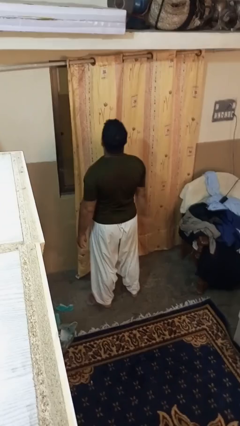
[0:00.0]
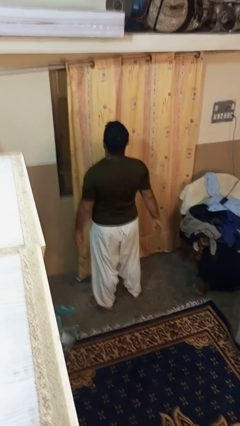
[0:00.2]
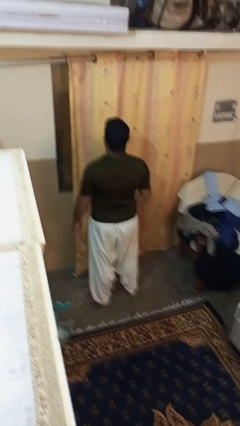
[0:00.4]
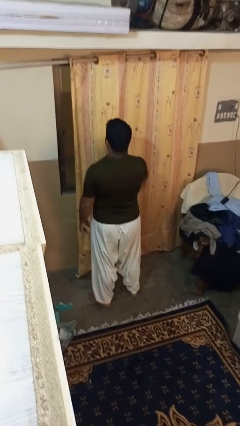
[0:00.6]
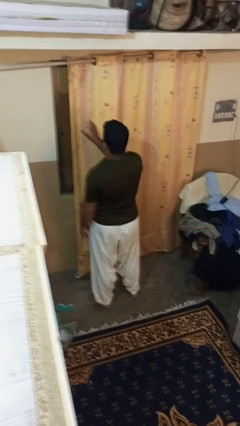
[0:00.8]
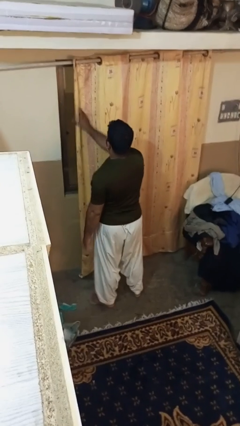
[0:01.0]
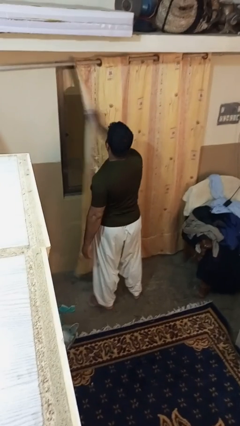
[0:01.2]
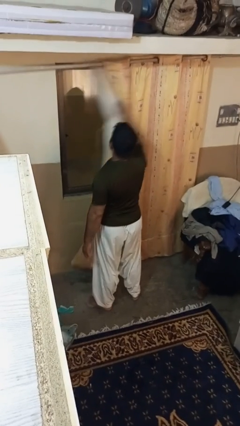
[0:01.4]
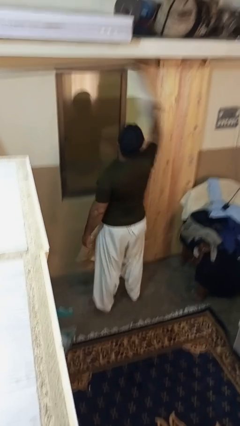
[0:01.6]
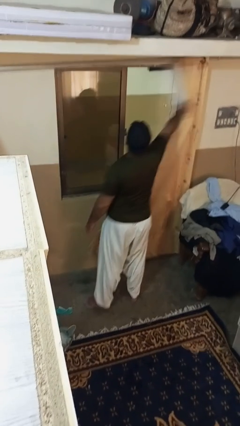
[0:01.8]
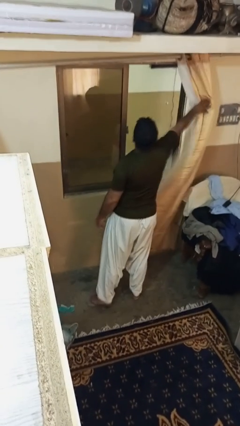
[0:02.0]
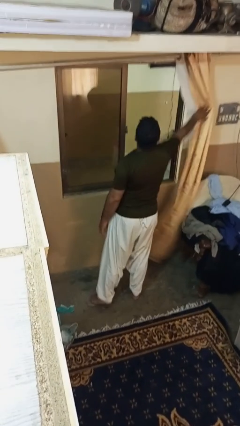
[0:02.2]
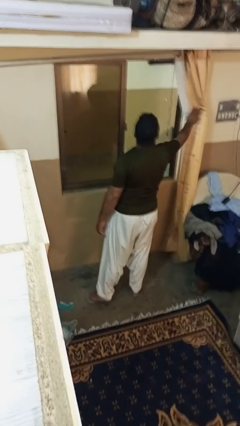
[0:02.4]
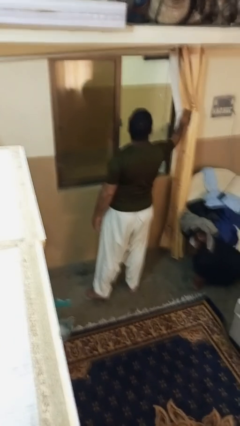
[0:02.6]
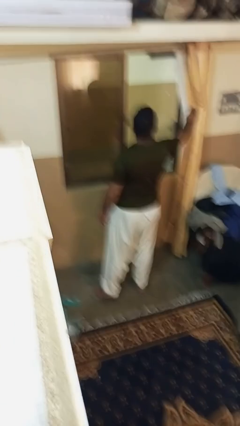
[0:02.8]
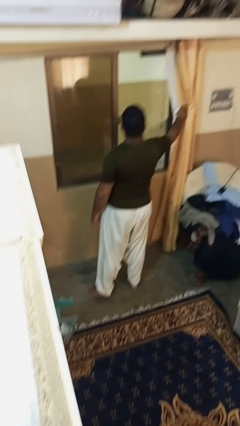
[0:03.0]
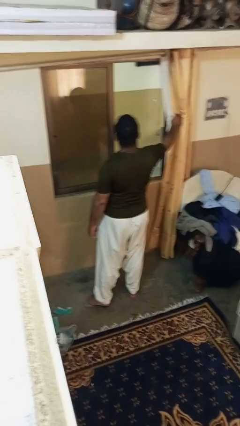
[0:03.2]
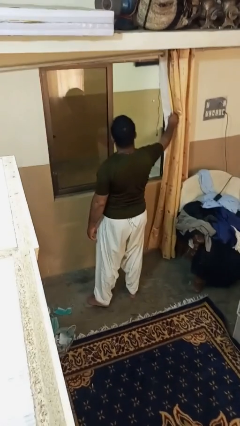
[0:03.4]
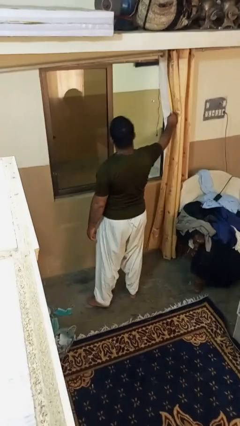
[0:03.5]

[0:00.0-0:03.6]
person opens curtains

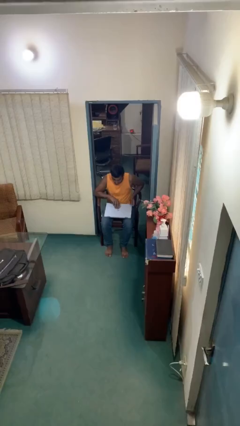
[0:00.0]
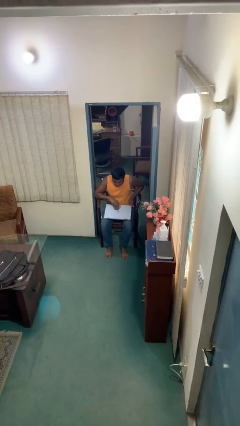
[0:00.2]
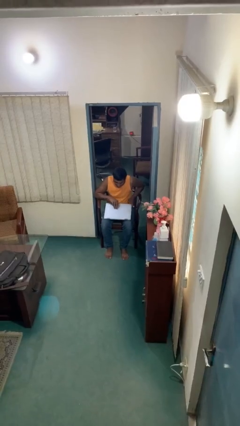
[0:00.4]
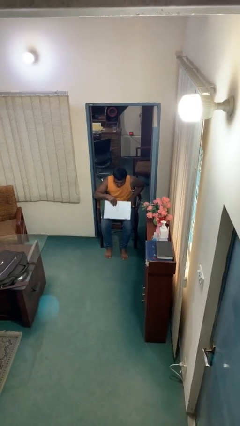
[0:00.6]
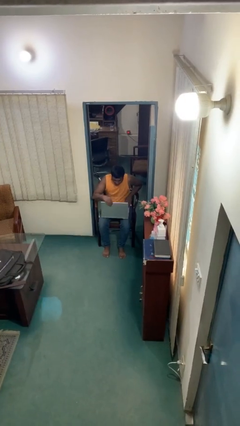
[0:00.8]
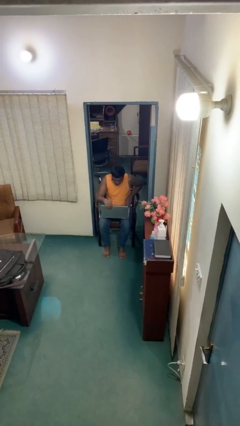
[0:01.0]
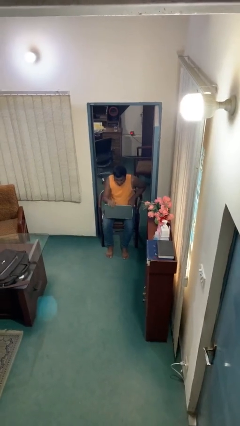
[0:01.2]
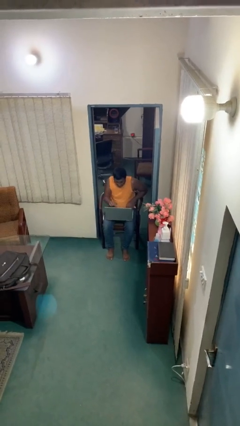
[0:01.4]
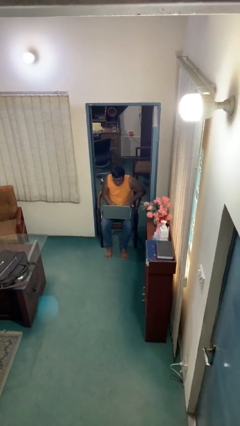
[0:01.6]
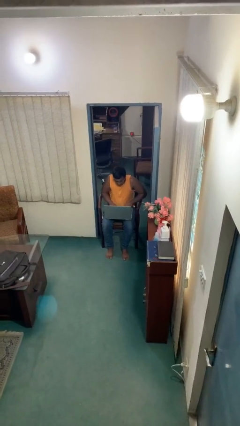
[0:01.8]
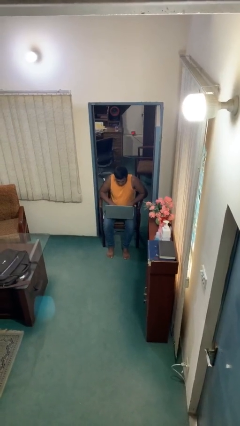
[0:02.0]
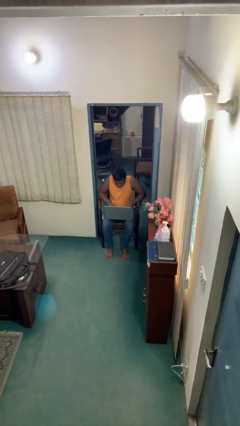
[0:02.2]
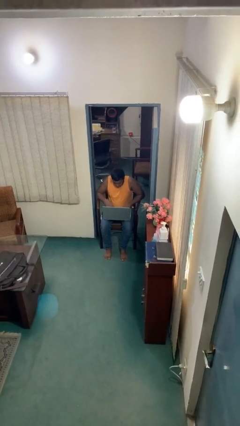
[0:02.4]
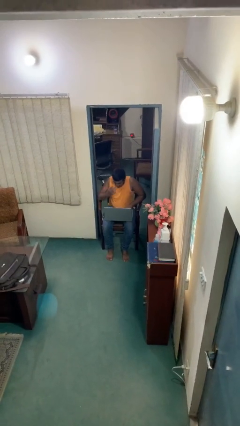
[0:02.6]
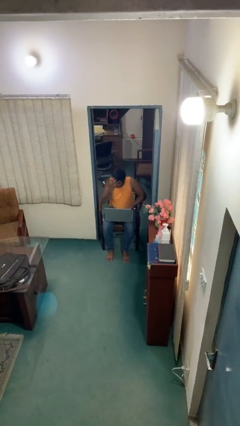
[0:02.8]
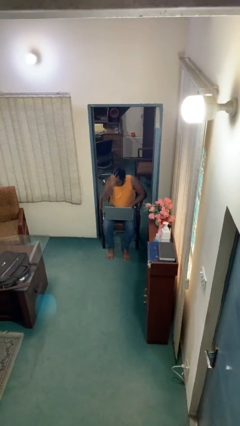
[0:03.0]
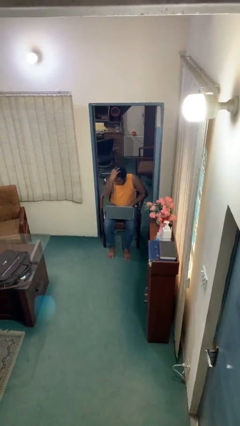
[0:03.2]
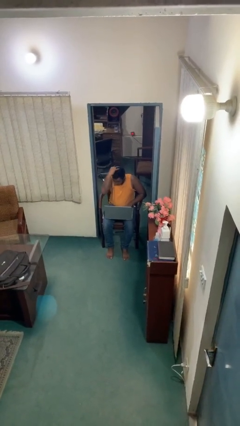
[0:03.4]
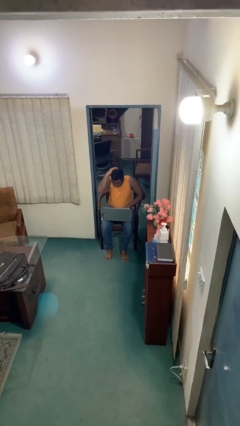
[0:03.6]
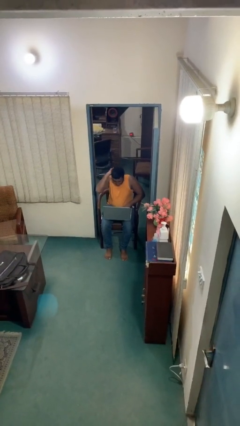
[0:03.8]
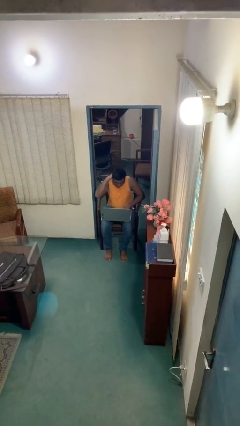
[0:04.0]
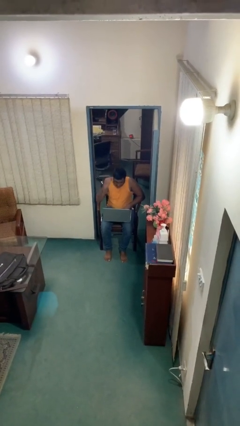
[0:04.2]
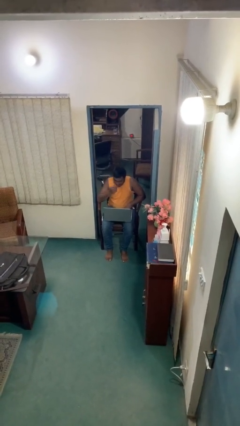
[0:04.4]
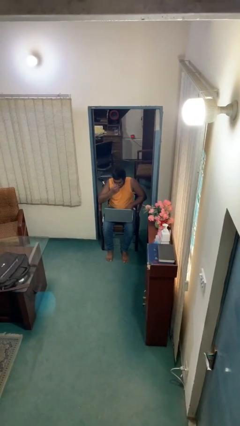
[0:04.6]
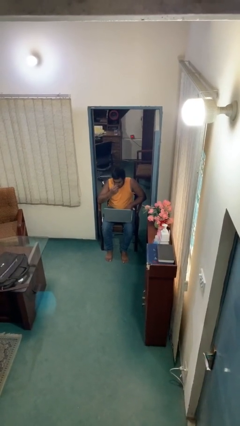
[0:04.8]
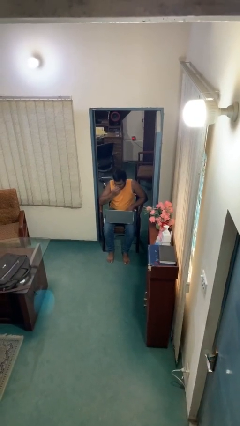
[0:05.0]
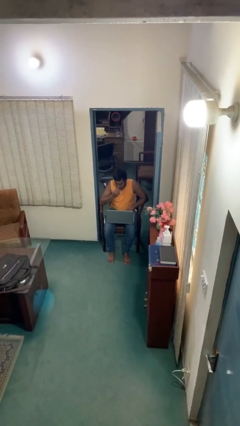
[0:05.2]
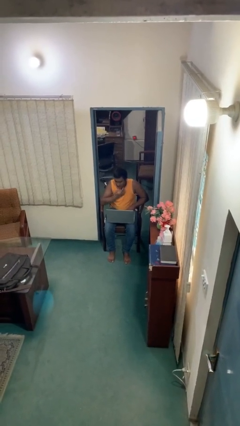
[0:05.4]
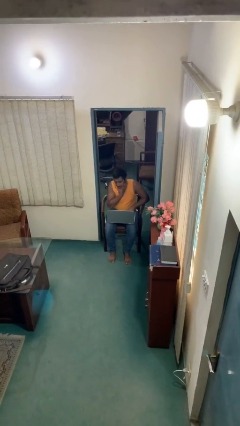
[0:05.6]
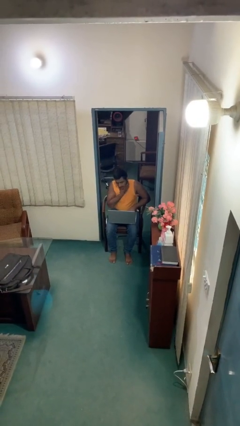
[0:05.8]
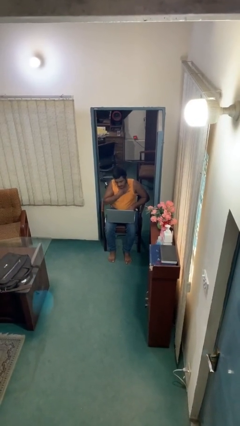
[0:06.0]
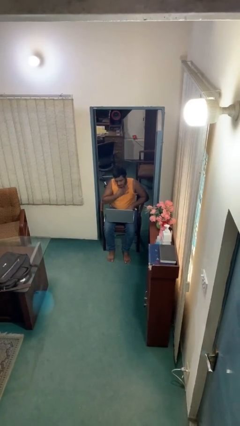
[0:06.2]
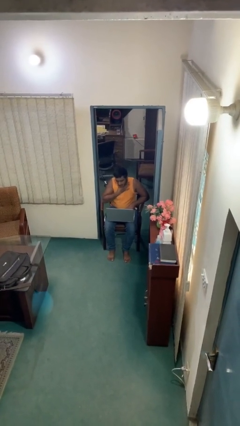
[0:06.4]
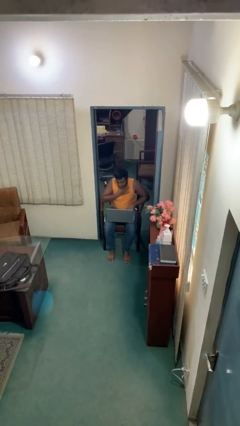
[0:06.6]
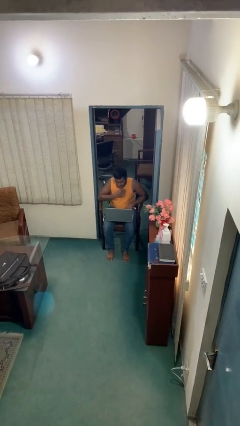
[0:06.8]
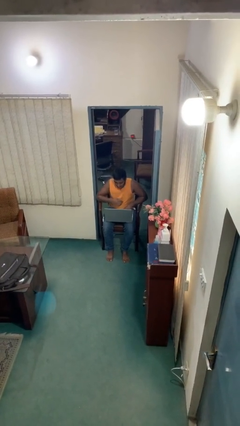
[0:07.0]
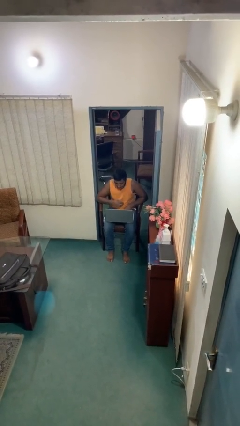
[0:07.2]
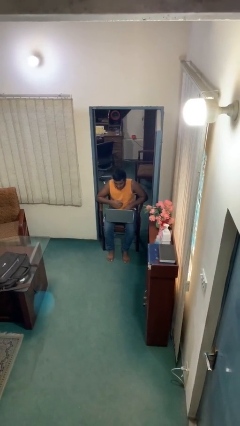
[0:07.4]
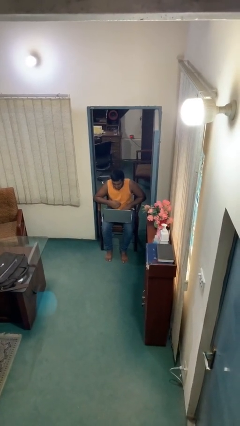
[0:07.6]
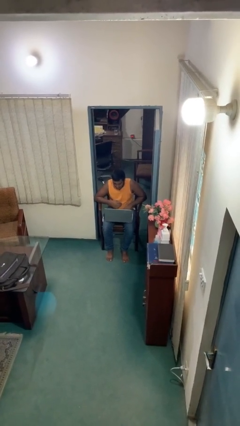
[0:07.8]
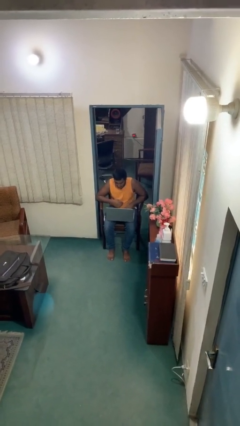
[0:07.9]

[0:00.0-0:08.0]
person interacts with laptop

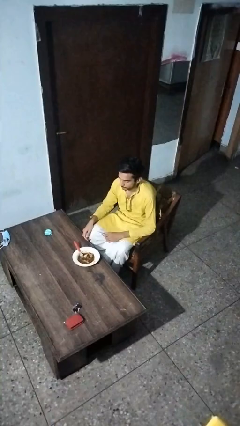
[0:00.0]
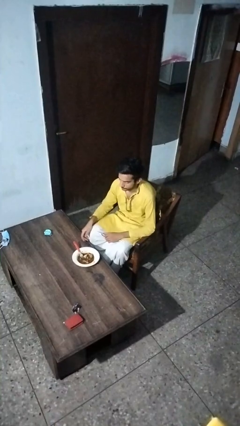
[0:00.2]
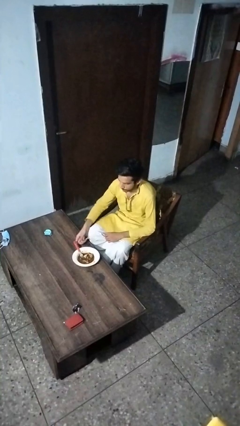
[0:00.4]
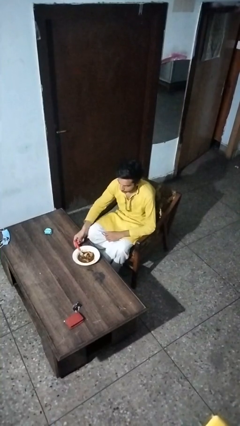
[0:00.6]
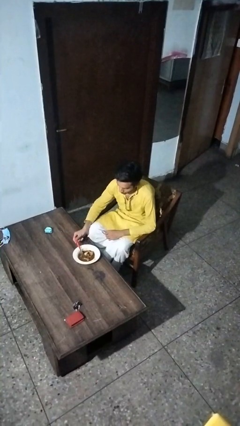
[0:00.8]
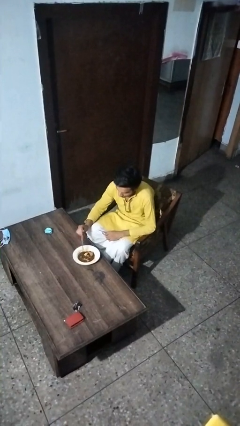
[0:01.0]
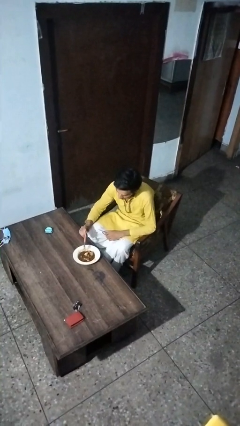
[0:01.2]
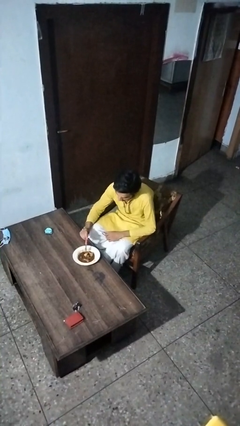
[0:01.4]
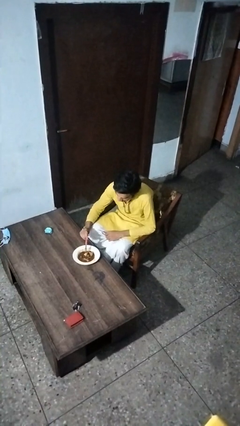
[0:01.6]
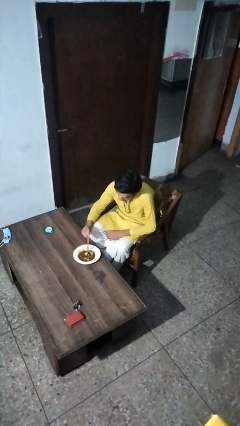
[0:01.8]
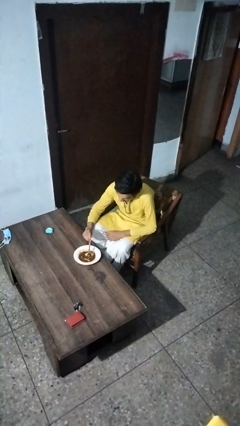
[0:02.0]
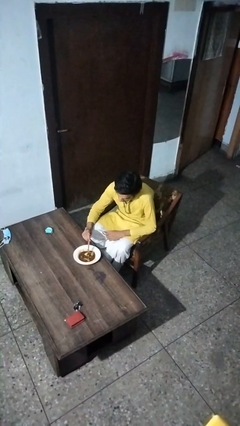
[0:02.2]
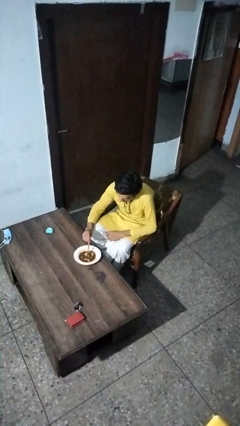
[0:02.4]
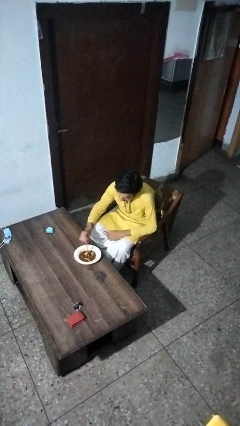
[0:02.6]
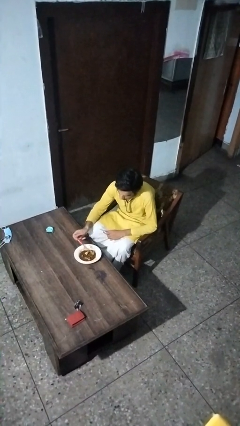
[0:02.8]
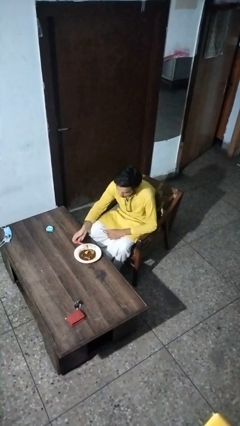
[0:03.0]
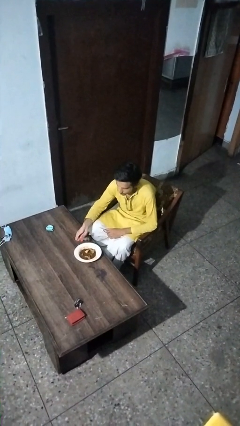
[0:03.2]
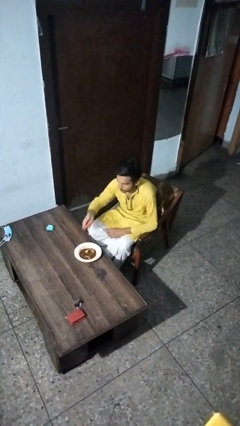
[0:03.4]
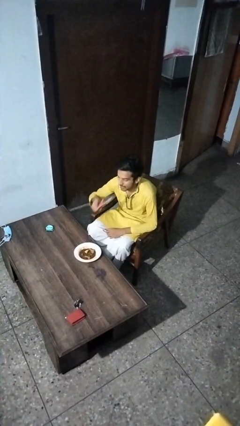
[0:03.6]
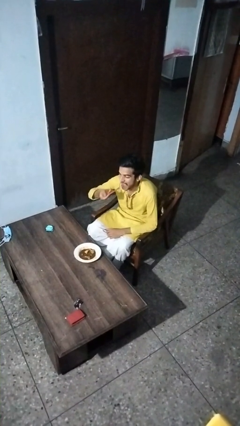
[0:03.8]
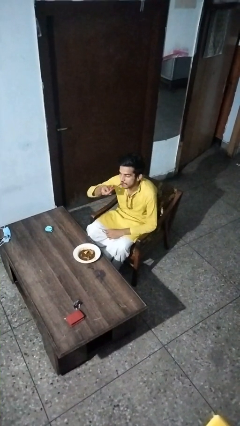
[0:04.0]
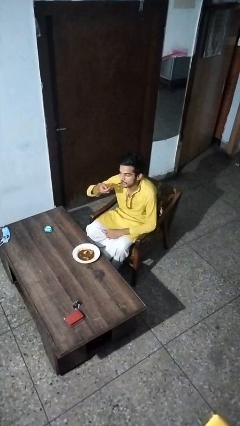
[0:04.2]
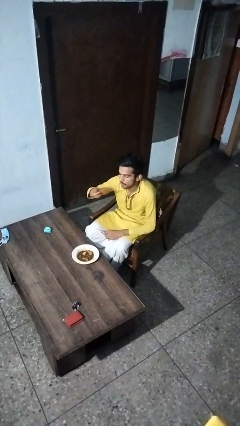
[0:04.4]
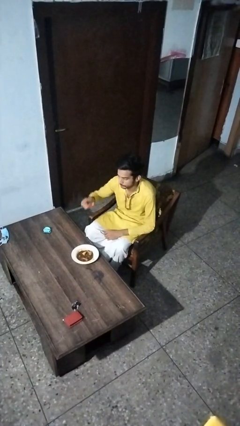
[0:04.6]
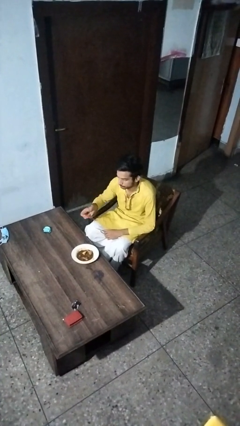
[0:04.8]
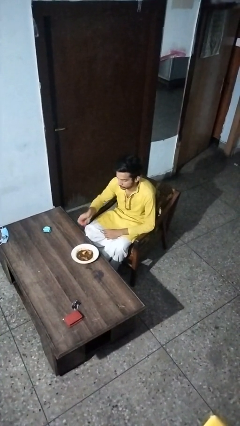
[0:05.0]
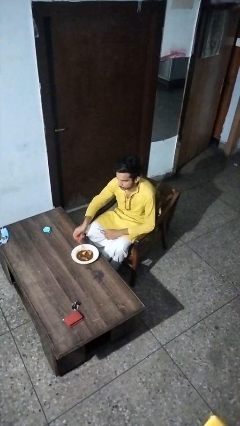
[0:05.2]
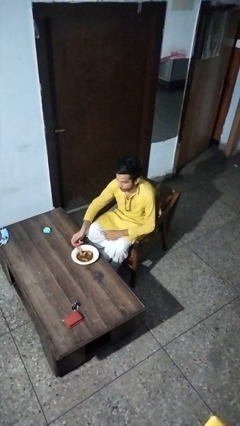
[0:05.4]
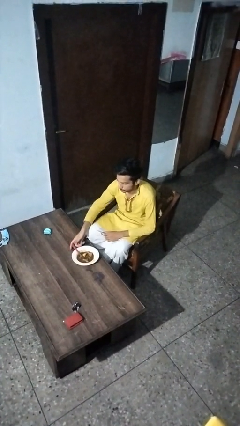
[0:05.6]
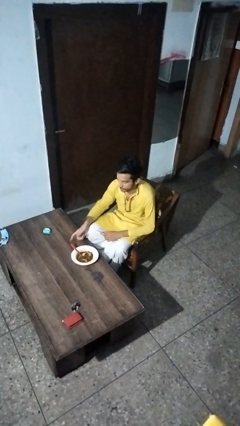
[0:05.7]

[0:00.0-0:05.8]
person eats with utensil

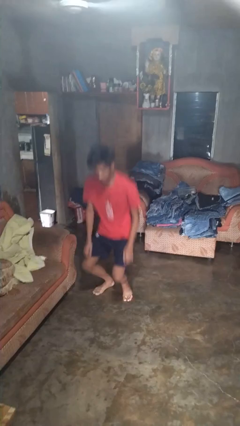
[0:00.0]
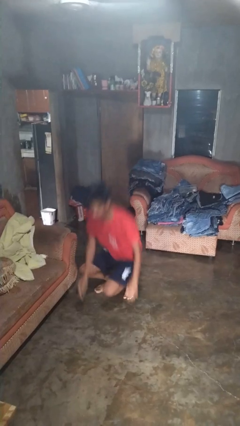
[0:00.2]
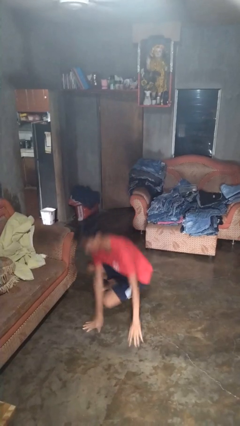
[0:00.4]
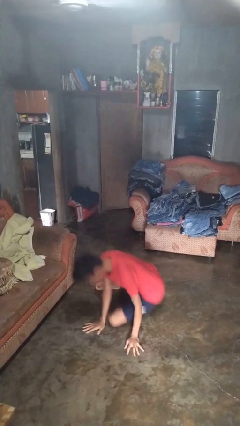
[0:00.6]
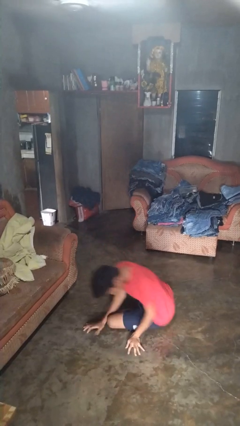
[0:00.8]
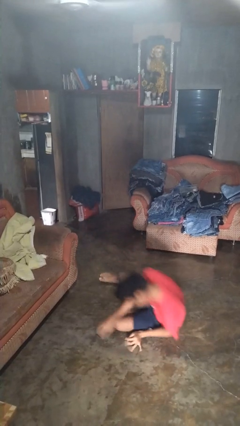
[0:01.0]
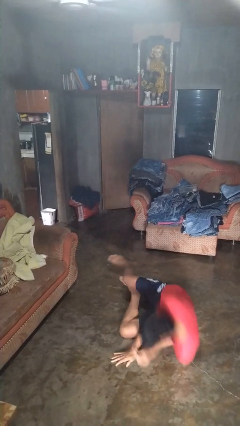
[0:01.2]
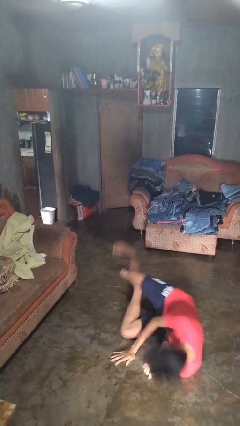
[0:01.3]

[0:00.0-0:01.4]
person falls while standing
